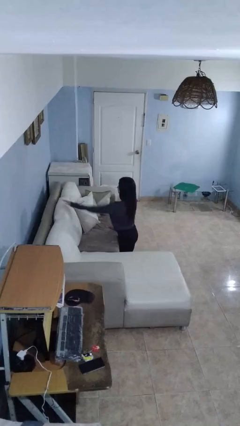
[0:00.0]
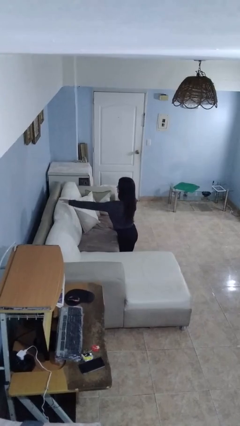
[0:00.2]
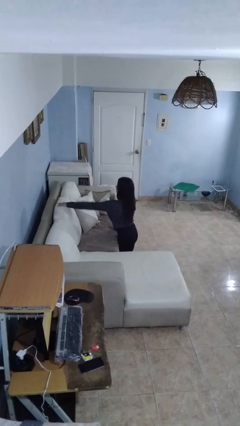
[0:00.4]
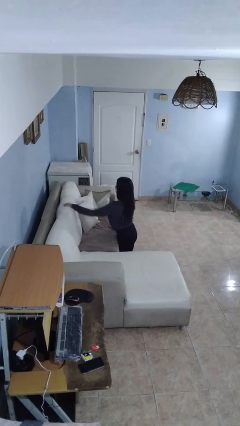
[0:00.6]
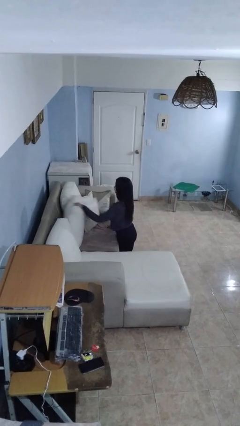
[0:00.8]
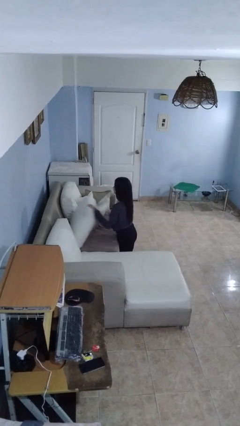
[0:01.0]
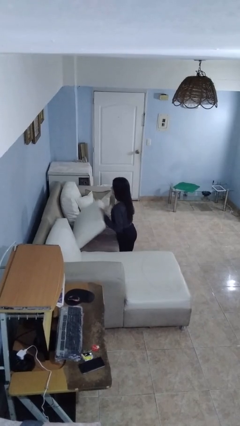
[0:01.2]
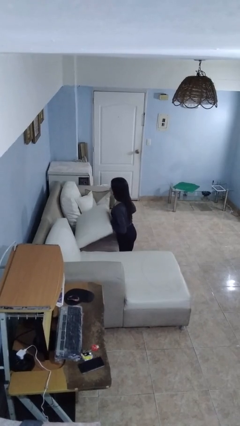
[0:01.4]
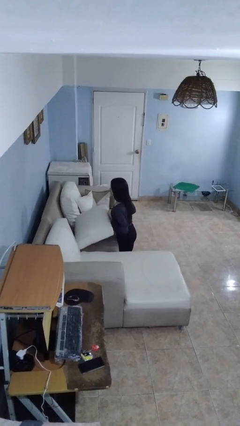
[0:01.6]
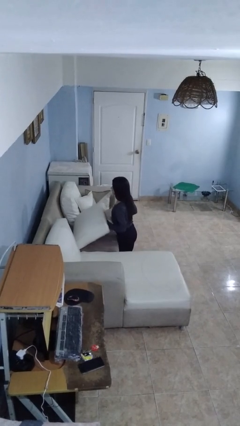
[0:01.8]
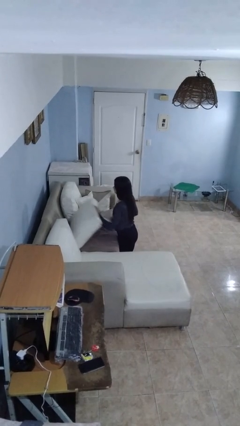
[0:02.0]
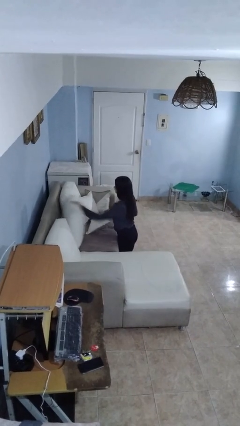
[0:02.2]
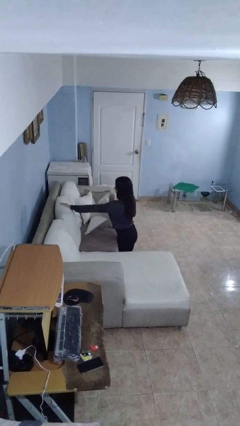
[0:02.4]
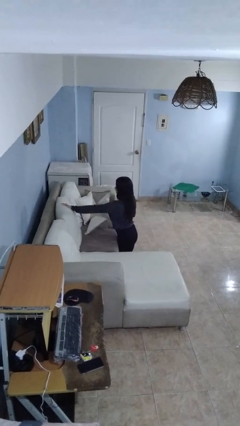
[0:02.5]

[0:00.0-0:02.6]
person searches in couch

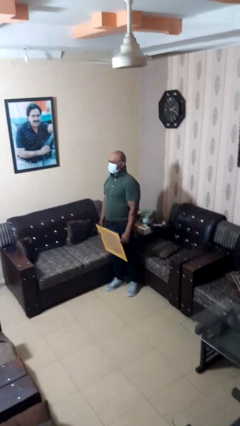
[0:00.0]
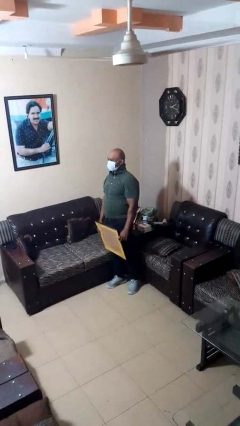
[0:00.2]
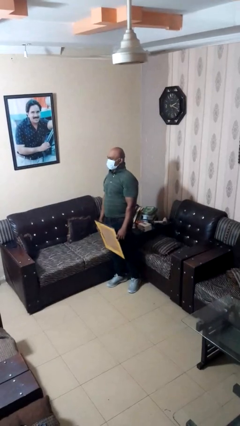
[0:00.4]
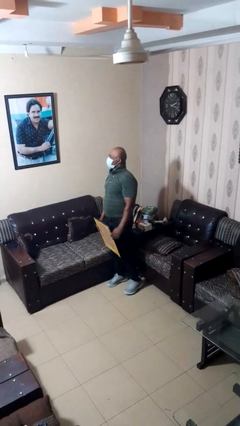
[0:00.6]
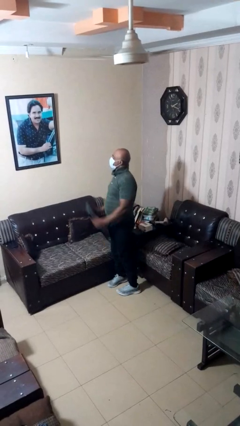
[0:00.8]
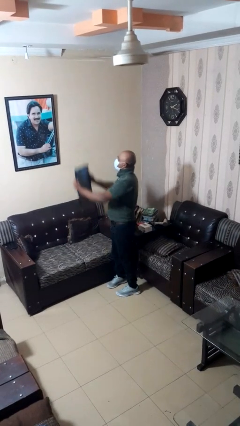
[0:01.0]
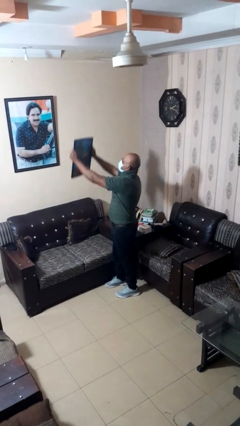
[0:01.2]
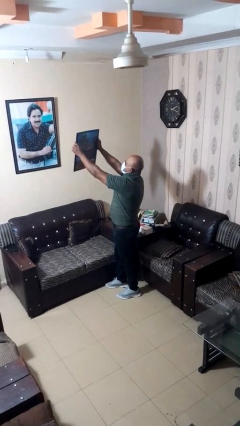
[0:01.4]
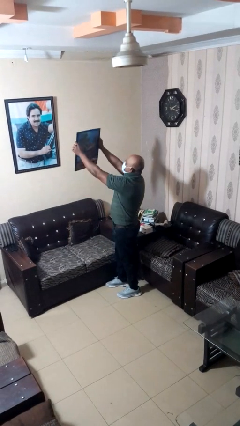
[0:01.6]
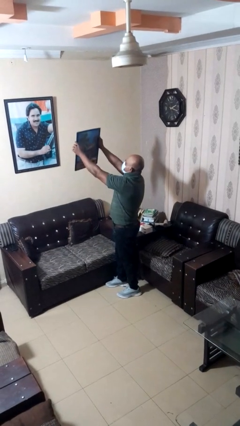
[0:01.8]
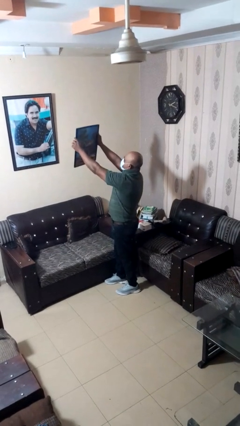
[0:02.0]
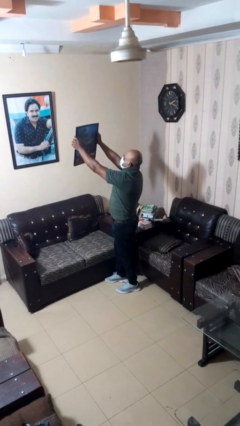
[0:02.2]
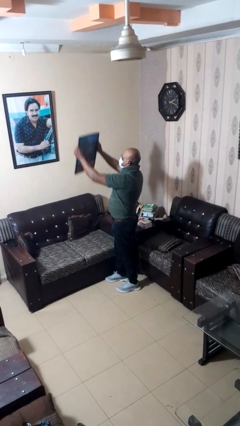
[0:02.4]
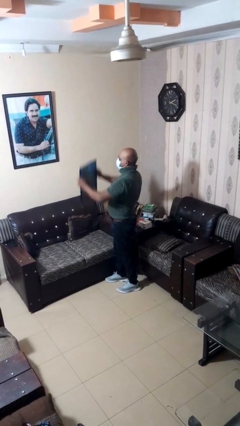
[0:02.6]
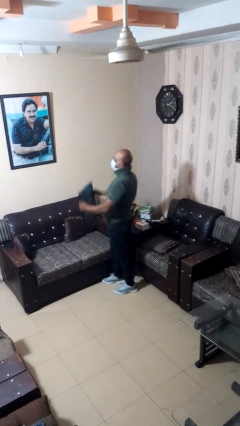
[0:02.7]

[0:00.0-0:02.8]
person holds object above head

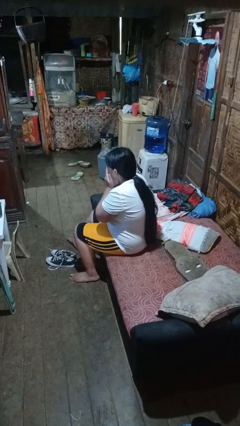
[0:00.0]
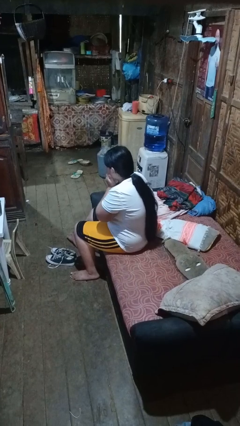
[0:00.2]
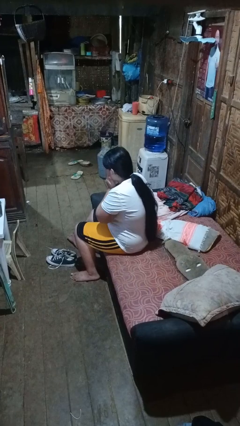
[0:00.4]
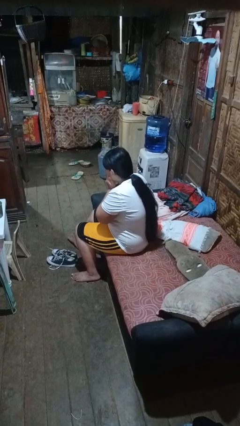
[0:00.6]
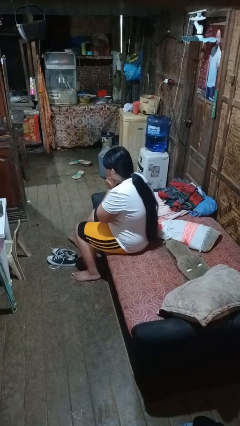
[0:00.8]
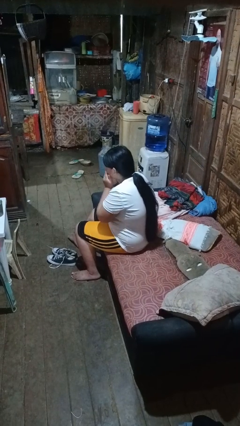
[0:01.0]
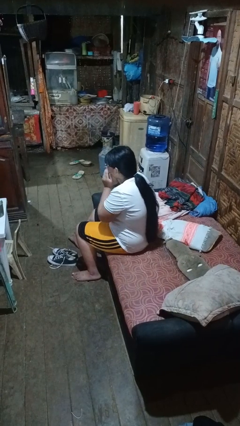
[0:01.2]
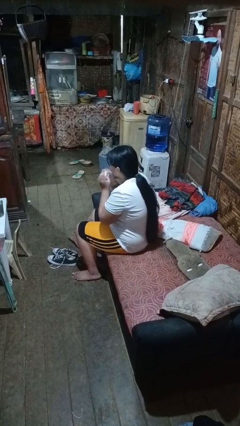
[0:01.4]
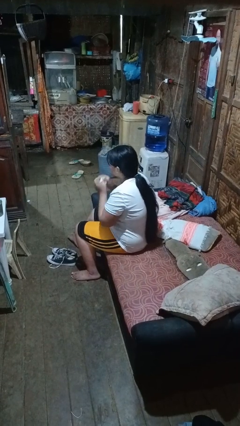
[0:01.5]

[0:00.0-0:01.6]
person blows nose

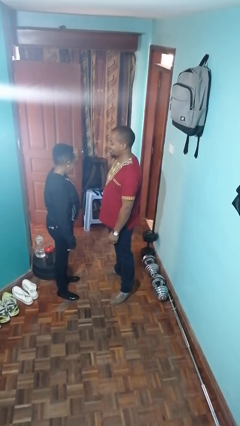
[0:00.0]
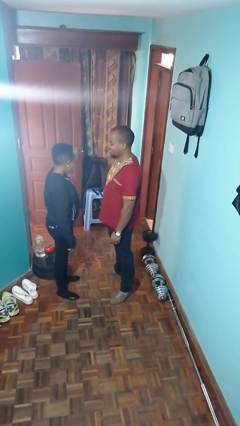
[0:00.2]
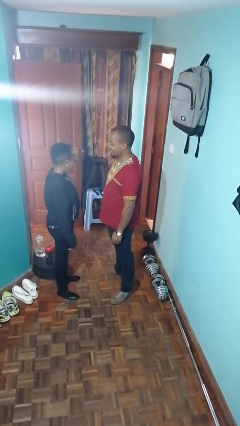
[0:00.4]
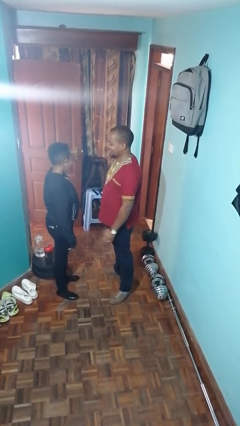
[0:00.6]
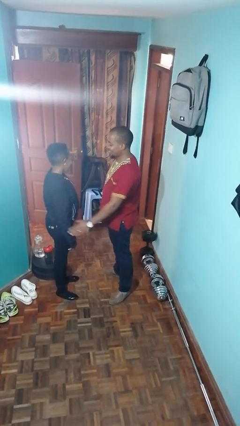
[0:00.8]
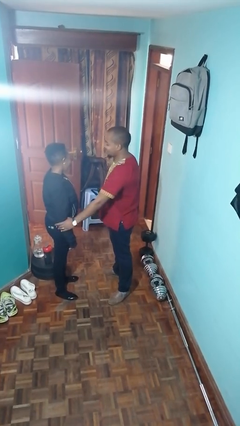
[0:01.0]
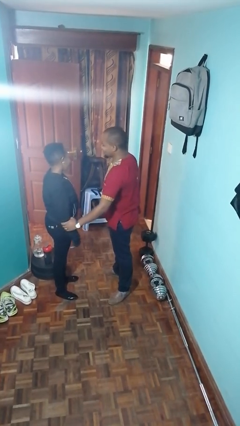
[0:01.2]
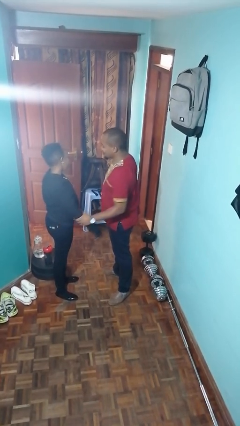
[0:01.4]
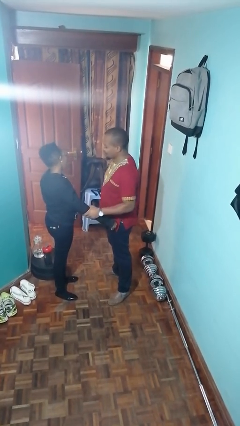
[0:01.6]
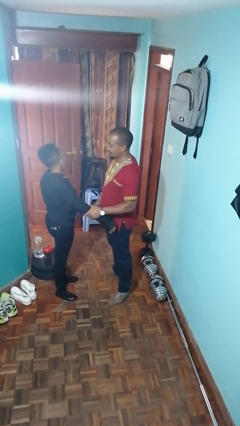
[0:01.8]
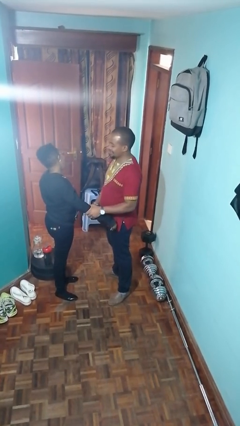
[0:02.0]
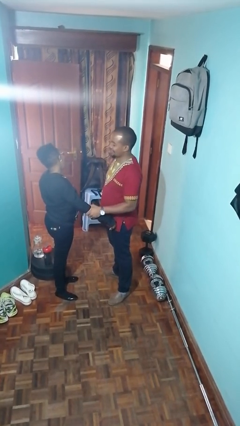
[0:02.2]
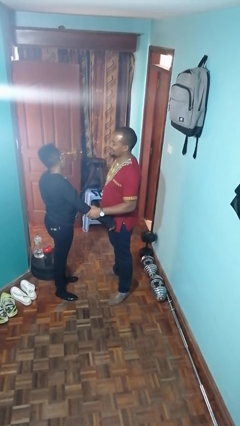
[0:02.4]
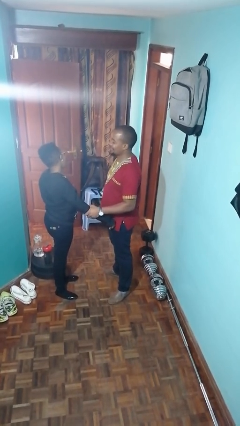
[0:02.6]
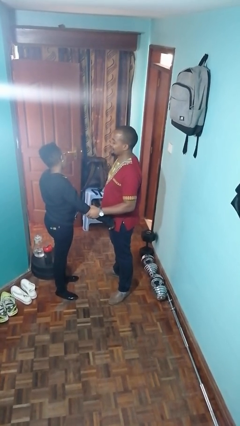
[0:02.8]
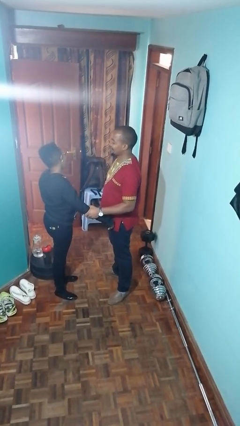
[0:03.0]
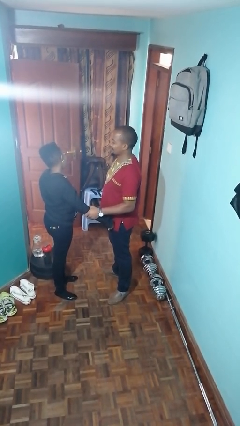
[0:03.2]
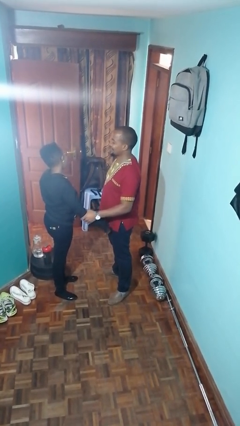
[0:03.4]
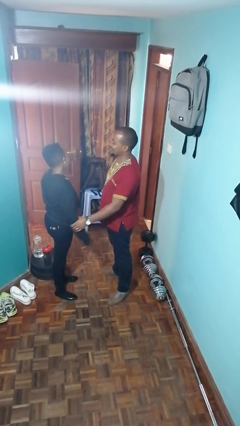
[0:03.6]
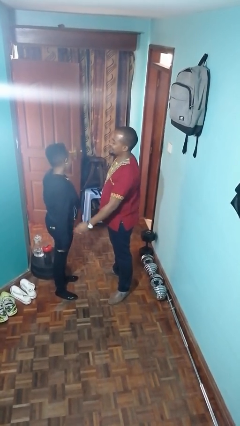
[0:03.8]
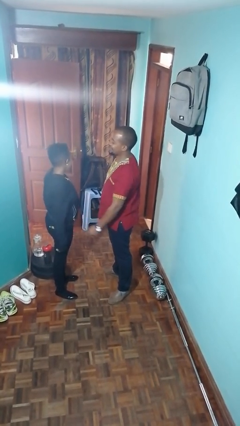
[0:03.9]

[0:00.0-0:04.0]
person grabs person by forearm

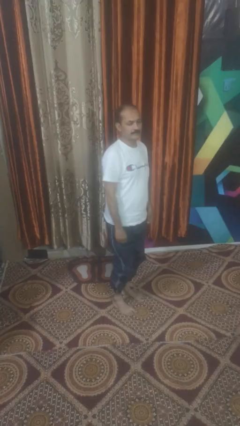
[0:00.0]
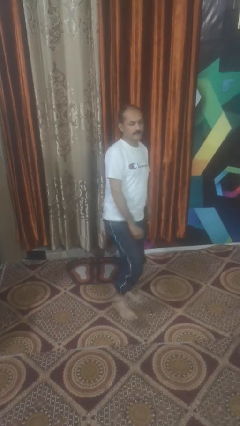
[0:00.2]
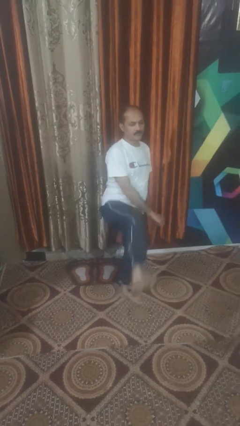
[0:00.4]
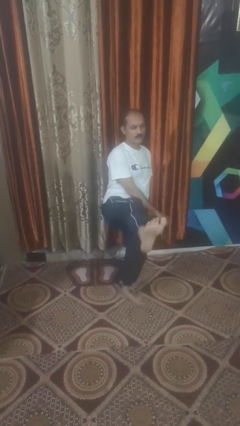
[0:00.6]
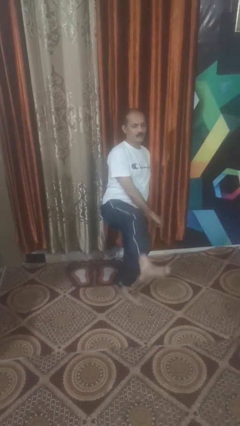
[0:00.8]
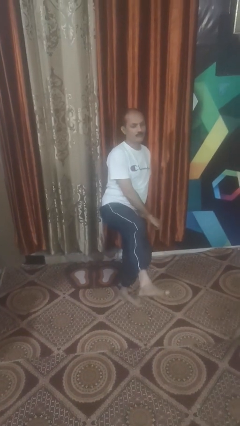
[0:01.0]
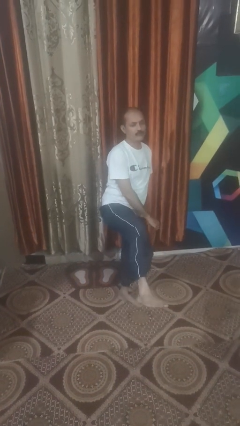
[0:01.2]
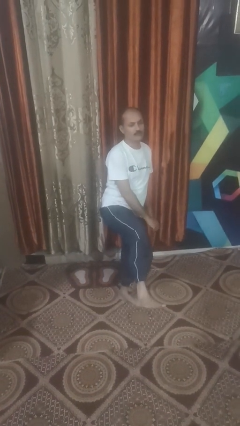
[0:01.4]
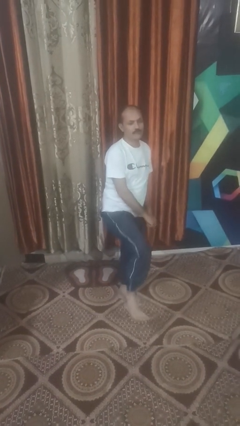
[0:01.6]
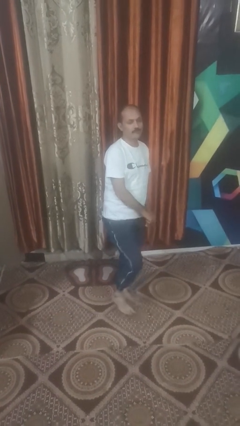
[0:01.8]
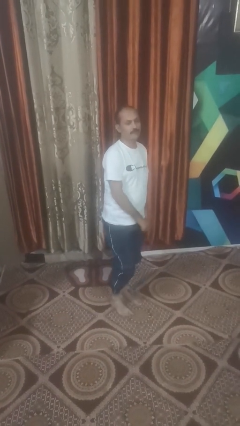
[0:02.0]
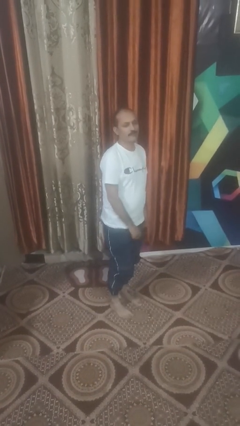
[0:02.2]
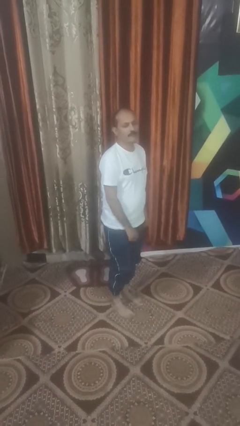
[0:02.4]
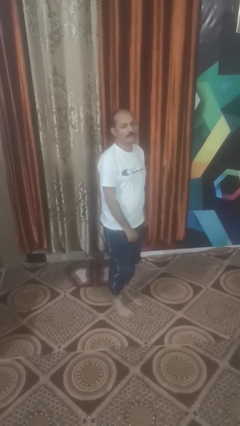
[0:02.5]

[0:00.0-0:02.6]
person karate kicks

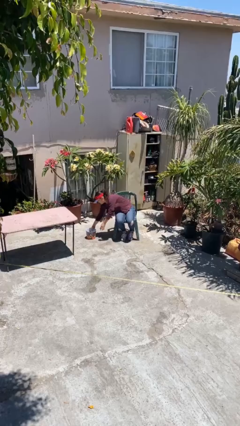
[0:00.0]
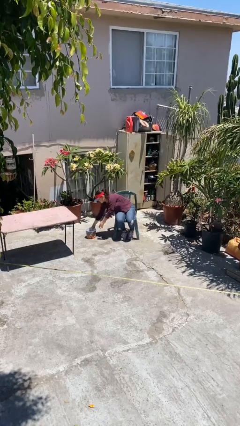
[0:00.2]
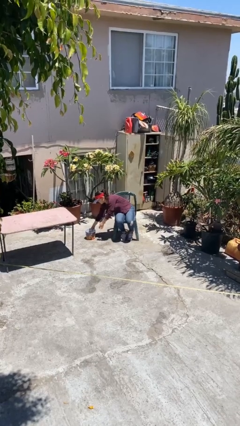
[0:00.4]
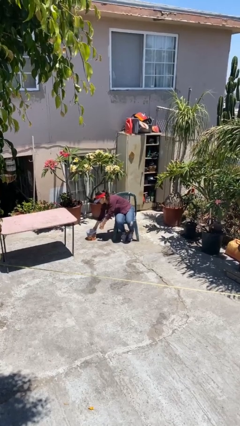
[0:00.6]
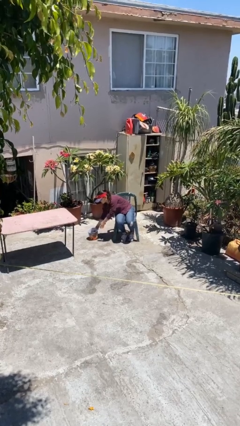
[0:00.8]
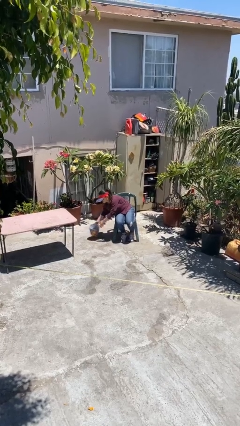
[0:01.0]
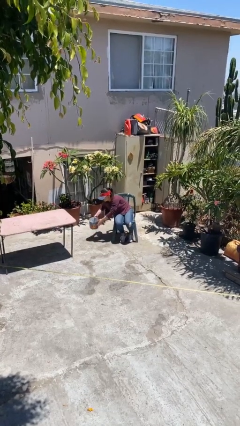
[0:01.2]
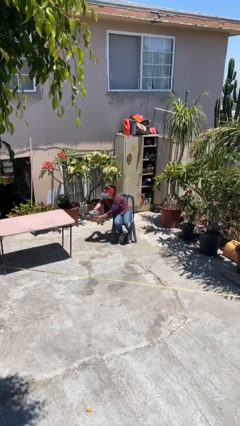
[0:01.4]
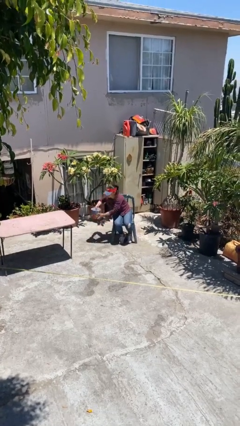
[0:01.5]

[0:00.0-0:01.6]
person picks up object from floor

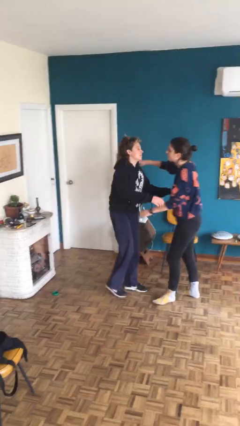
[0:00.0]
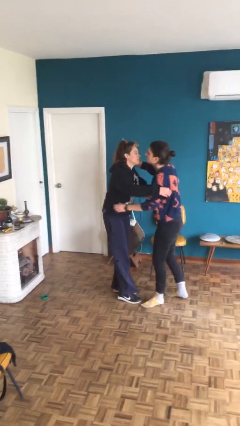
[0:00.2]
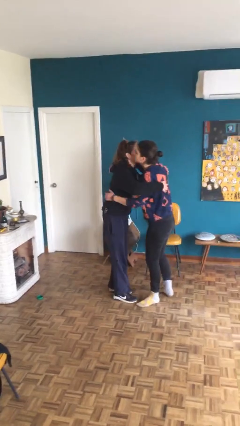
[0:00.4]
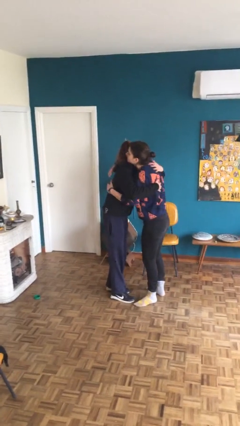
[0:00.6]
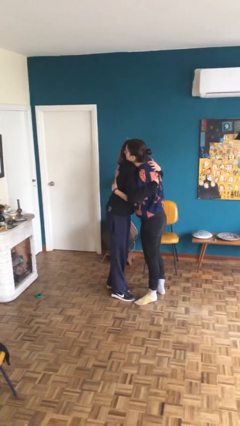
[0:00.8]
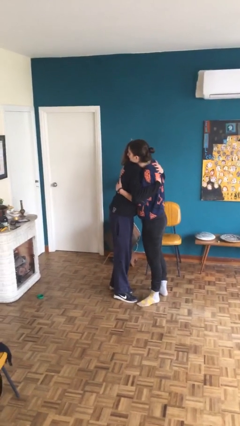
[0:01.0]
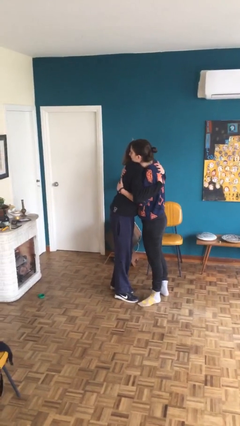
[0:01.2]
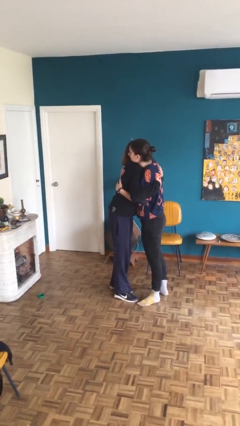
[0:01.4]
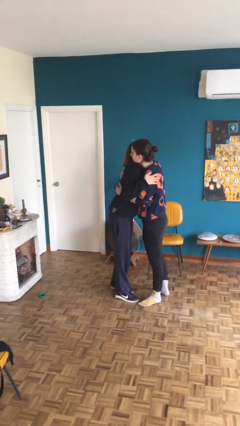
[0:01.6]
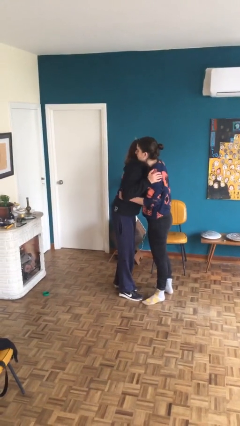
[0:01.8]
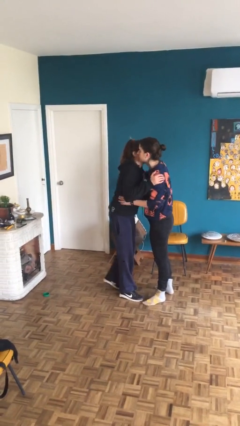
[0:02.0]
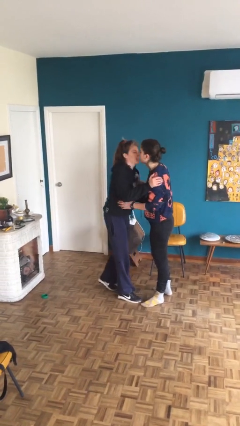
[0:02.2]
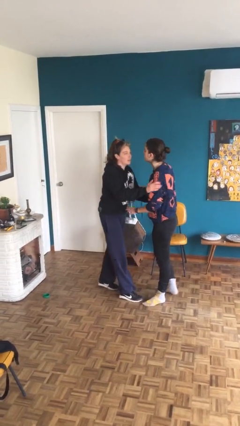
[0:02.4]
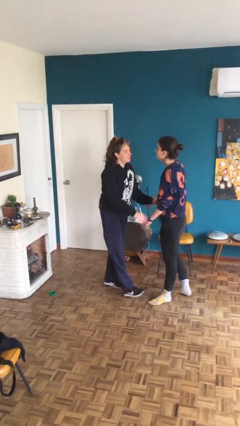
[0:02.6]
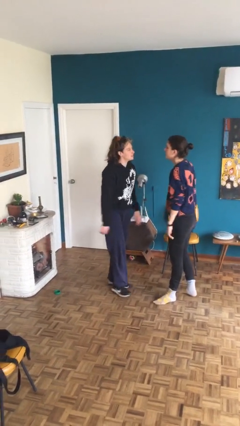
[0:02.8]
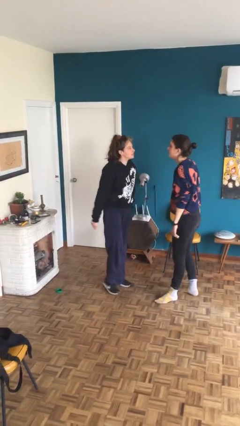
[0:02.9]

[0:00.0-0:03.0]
person embraces person
